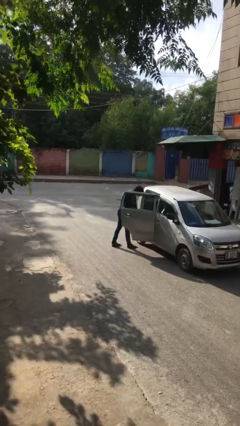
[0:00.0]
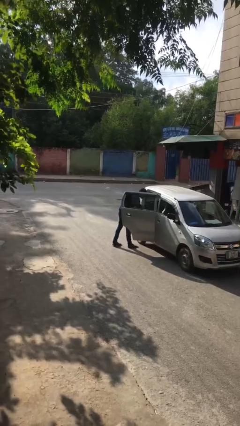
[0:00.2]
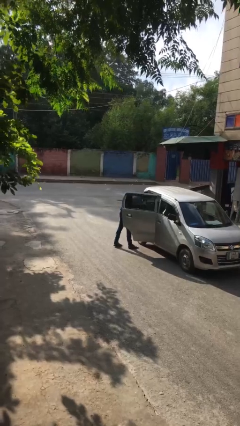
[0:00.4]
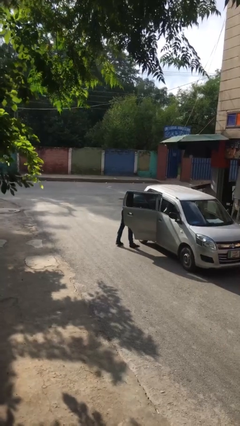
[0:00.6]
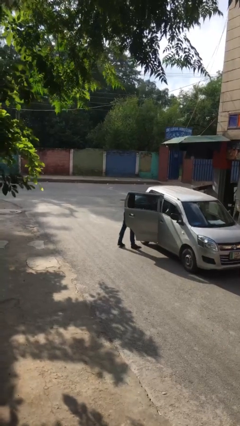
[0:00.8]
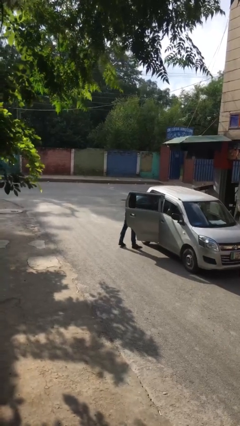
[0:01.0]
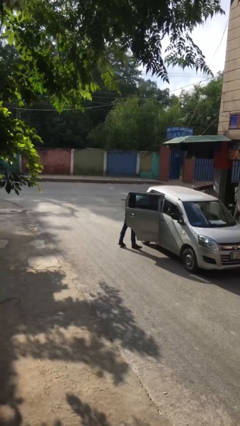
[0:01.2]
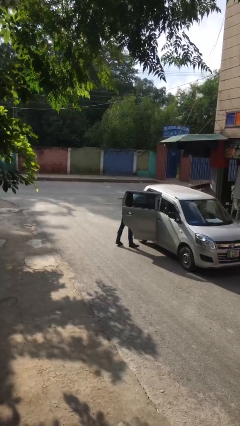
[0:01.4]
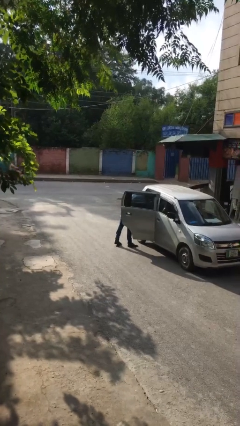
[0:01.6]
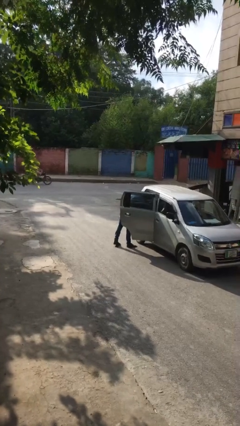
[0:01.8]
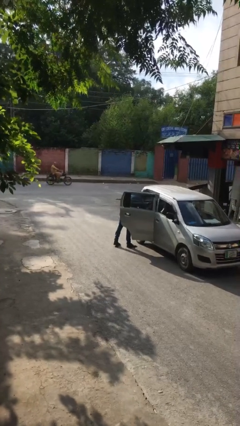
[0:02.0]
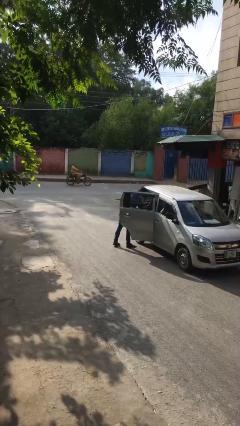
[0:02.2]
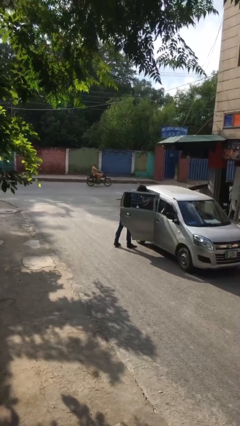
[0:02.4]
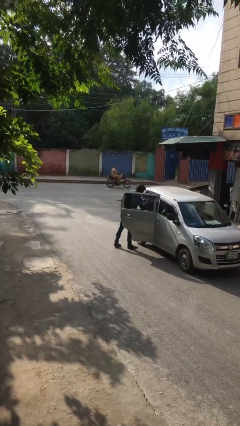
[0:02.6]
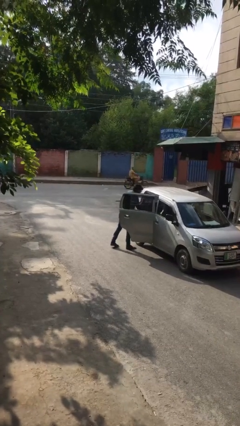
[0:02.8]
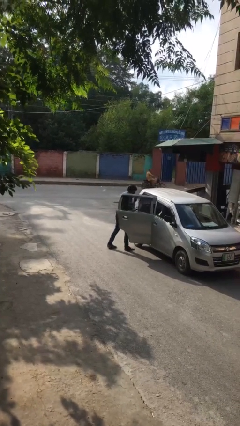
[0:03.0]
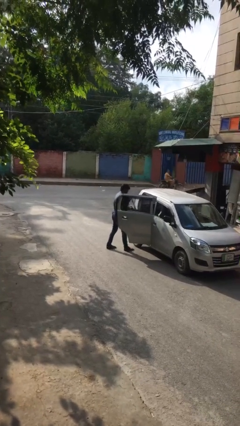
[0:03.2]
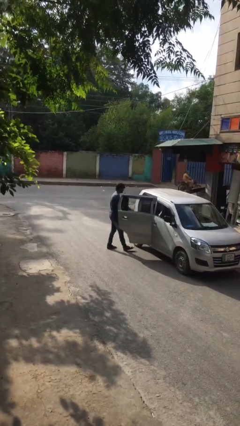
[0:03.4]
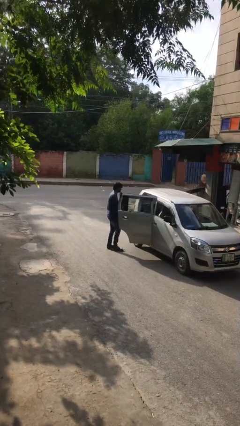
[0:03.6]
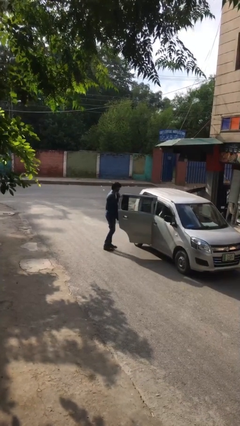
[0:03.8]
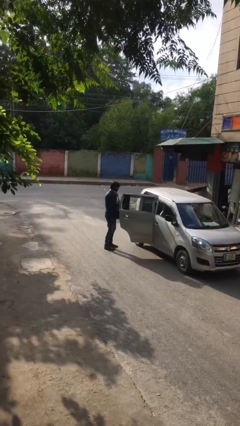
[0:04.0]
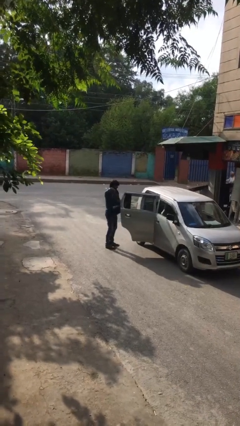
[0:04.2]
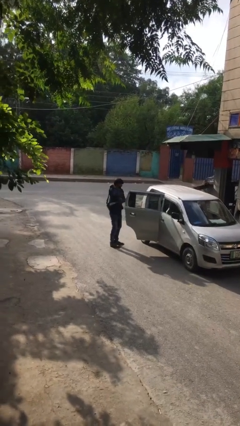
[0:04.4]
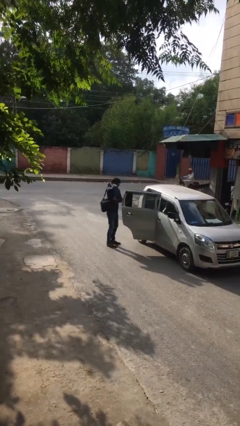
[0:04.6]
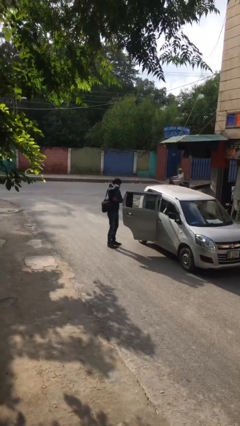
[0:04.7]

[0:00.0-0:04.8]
person unloads car

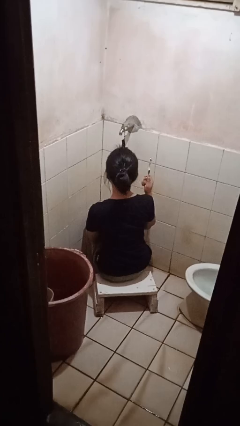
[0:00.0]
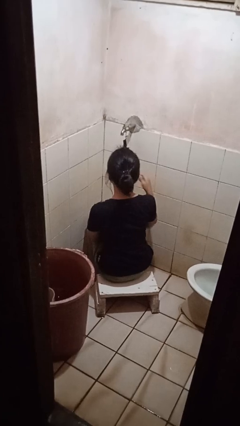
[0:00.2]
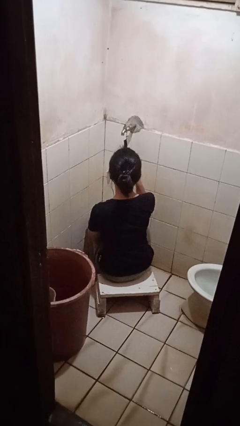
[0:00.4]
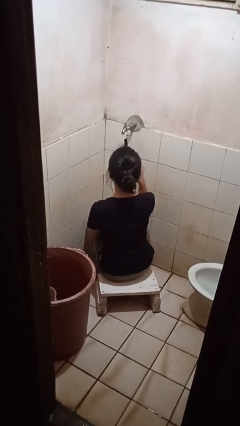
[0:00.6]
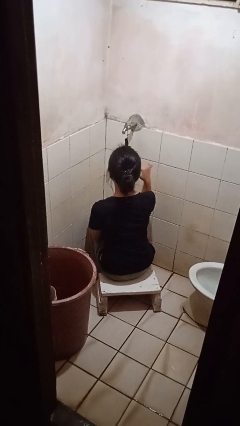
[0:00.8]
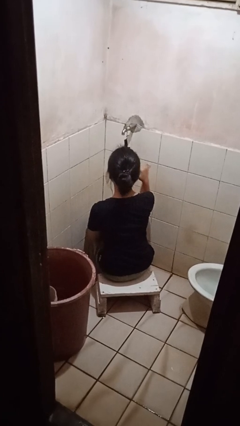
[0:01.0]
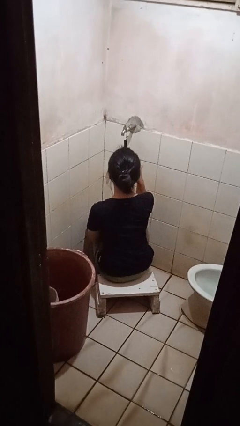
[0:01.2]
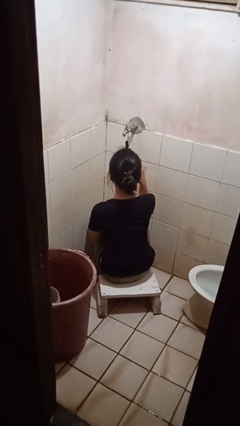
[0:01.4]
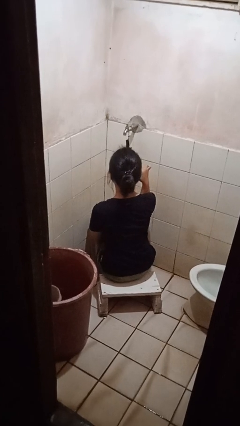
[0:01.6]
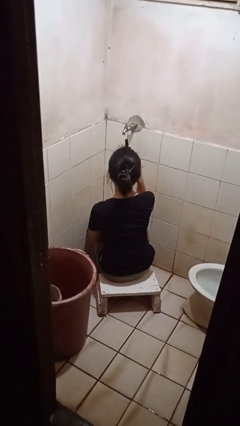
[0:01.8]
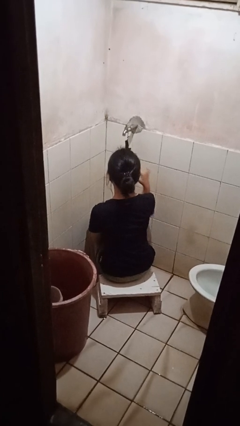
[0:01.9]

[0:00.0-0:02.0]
person brushes teeth

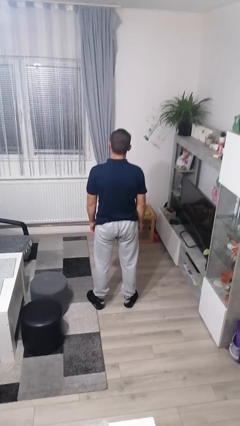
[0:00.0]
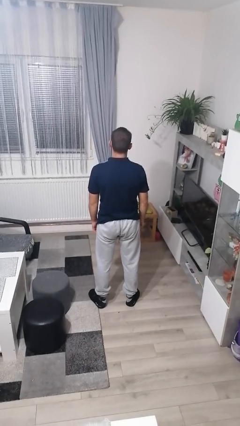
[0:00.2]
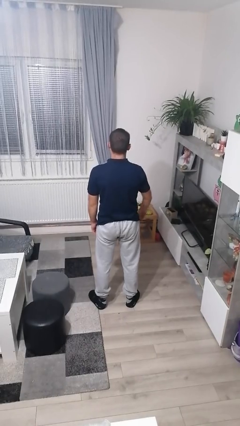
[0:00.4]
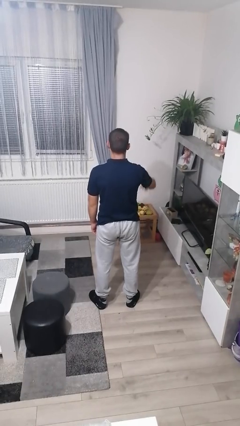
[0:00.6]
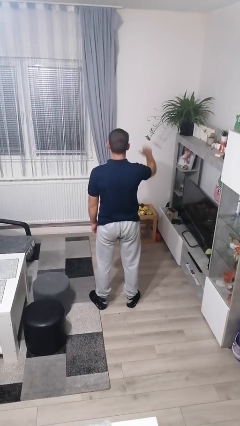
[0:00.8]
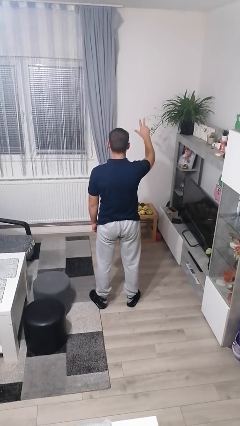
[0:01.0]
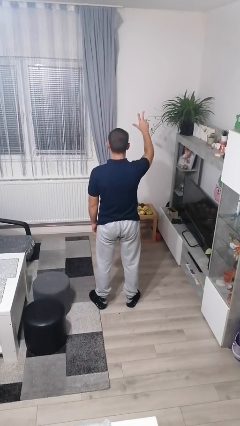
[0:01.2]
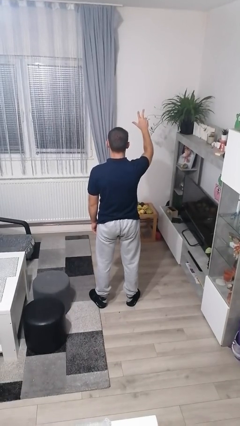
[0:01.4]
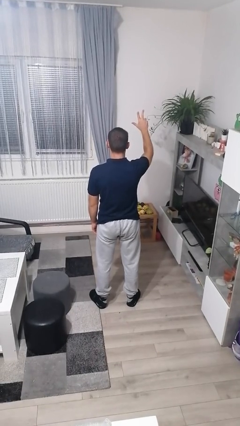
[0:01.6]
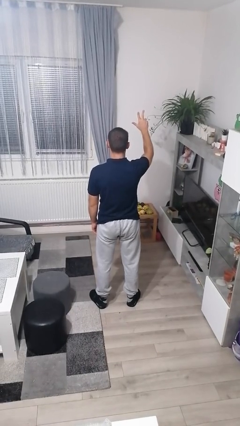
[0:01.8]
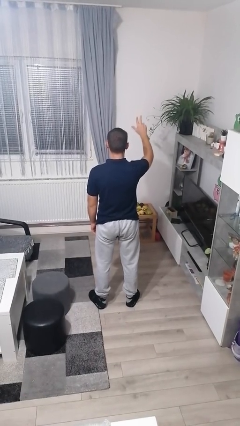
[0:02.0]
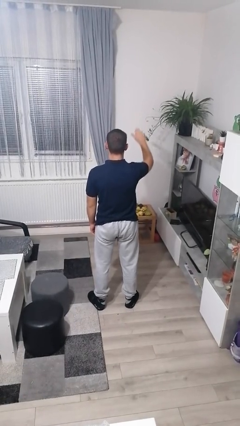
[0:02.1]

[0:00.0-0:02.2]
person gestures number three

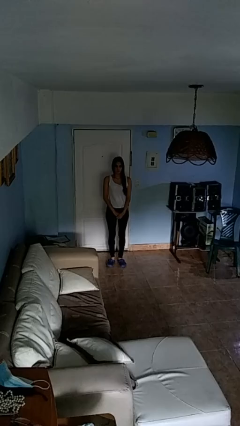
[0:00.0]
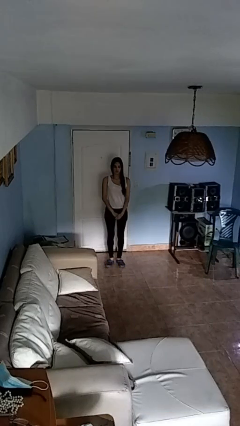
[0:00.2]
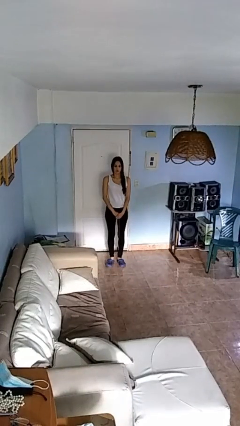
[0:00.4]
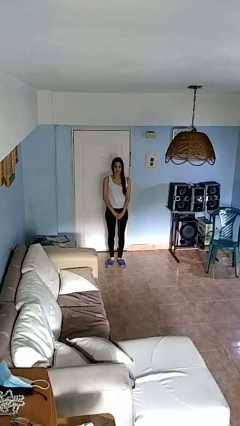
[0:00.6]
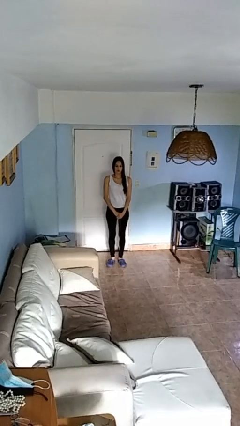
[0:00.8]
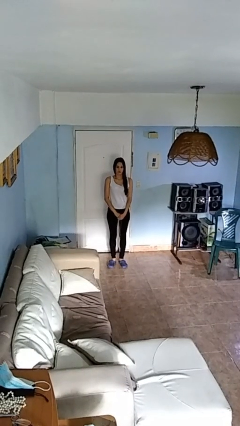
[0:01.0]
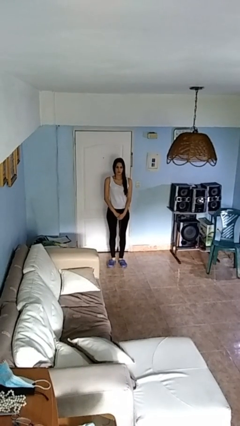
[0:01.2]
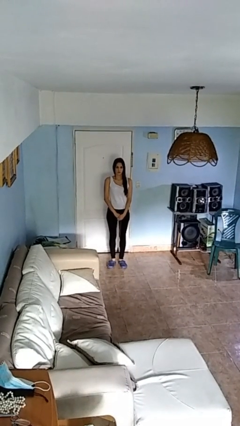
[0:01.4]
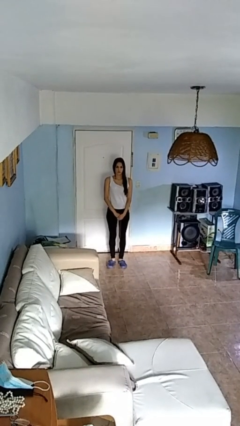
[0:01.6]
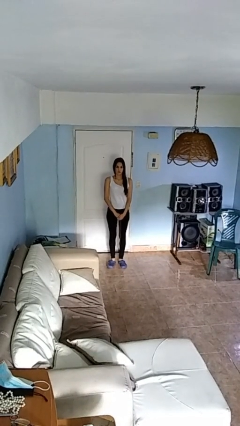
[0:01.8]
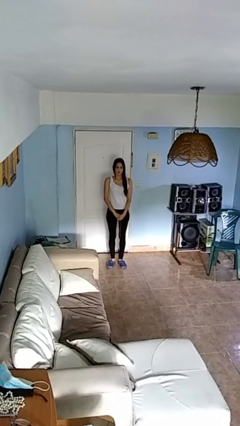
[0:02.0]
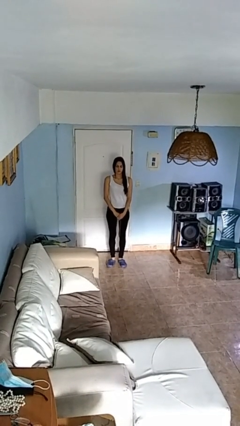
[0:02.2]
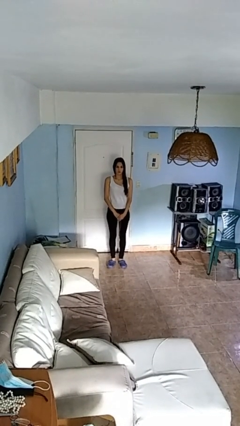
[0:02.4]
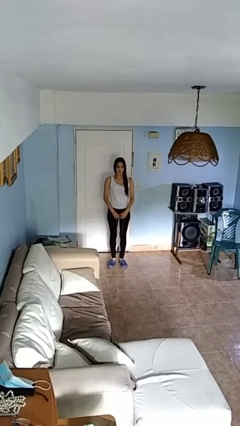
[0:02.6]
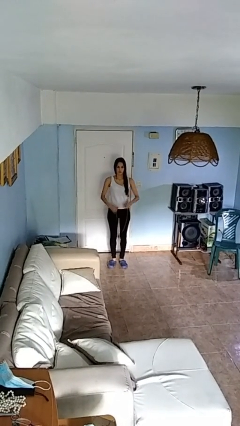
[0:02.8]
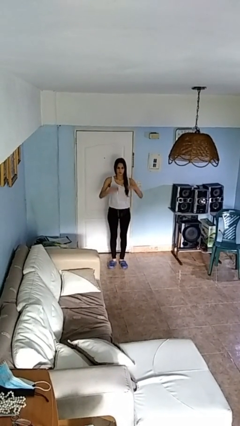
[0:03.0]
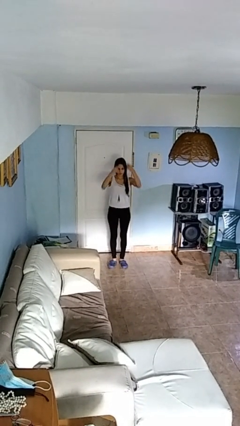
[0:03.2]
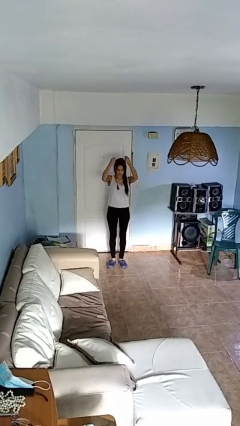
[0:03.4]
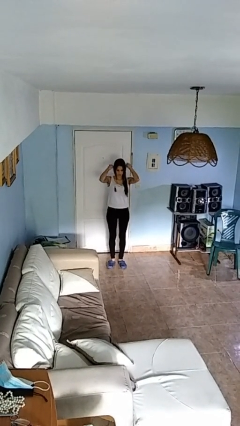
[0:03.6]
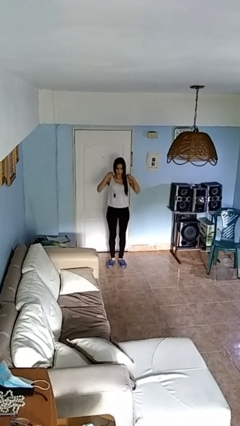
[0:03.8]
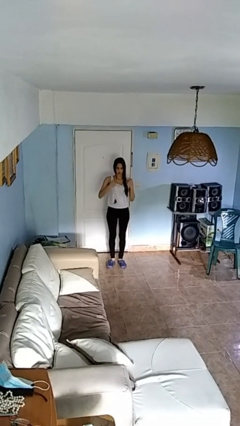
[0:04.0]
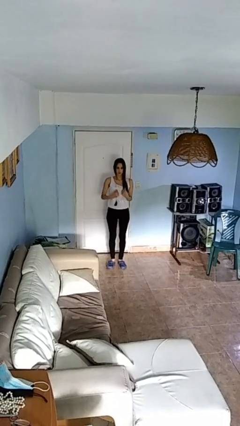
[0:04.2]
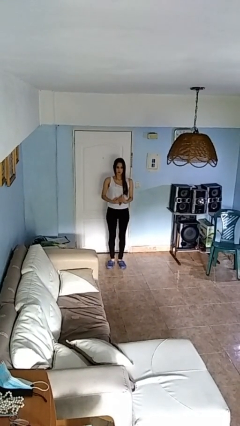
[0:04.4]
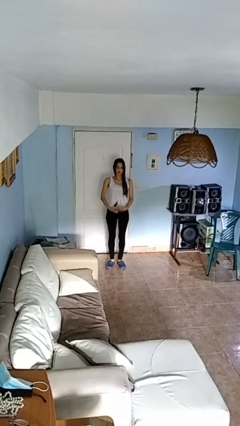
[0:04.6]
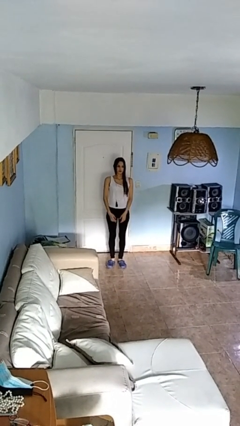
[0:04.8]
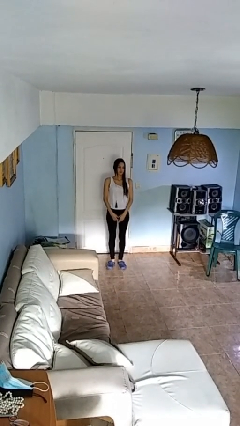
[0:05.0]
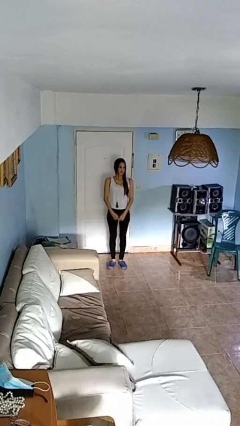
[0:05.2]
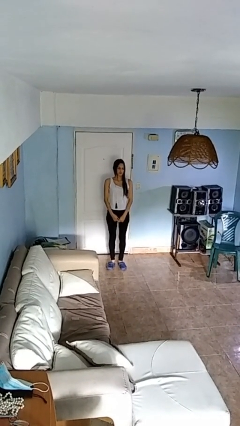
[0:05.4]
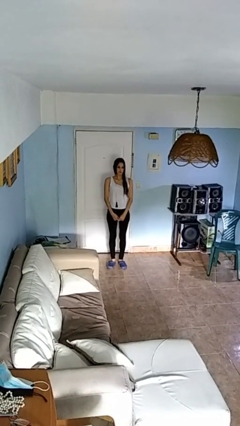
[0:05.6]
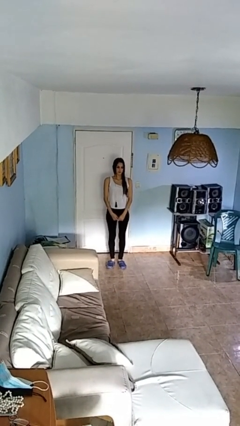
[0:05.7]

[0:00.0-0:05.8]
person puts on necklace

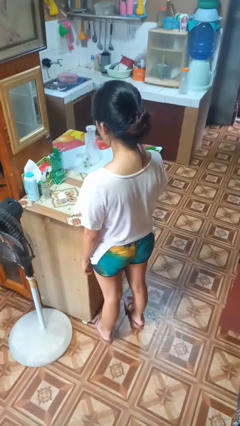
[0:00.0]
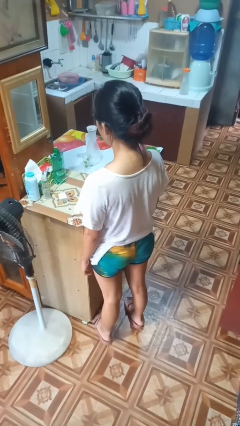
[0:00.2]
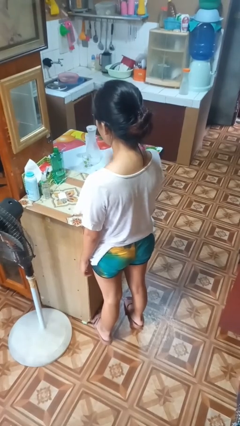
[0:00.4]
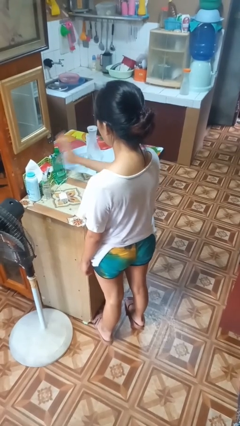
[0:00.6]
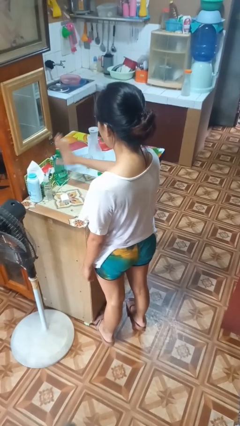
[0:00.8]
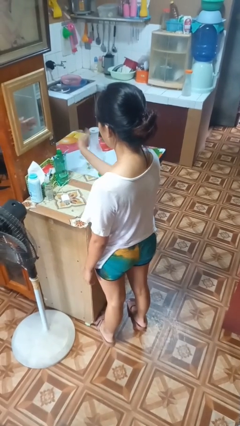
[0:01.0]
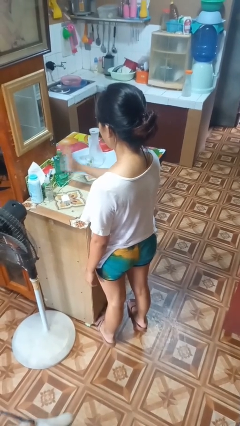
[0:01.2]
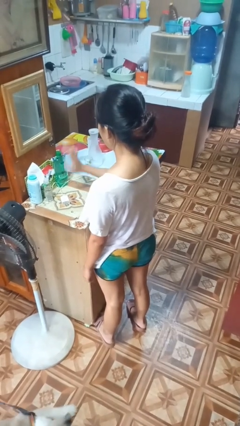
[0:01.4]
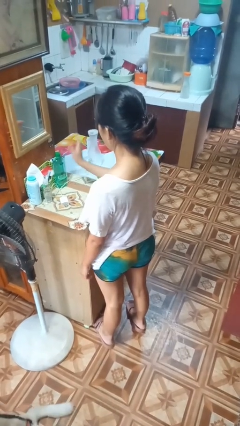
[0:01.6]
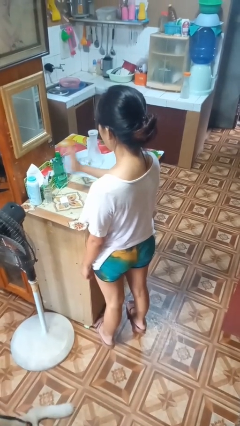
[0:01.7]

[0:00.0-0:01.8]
person waves hand over object

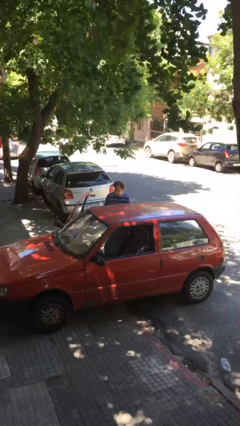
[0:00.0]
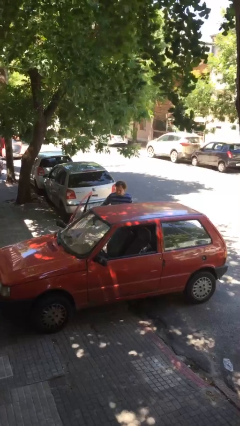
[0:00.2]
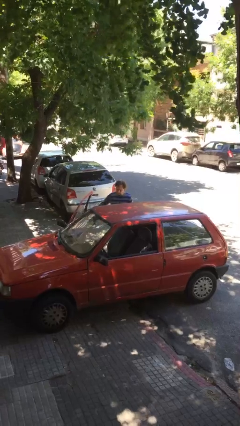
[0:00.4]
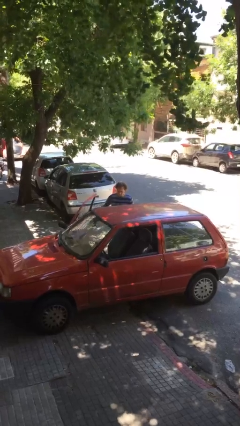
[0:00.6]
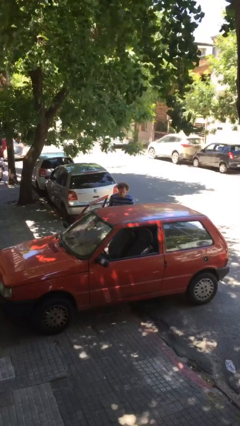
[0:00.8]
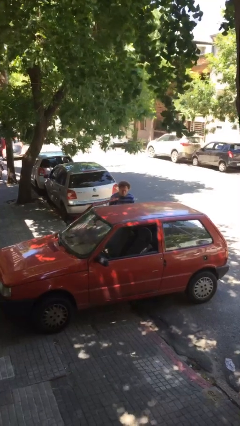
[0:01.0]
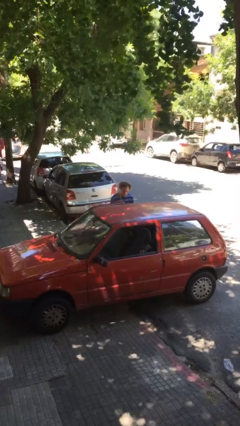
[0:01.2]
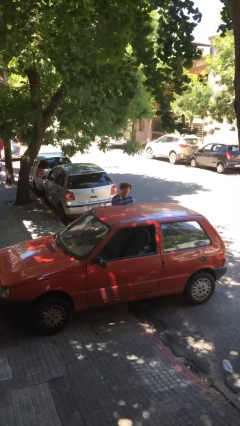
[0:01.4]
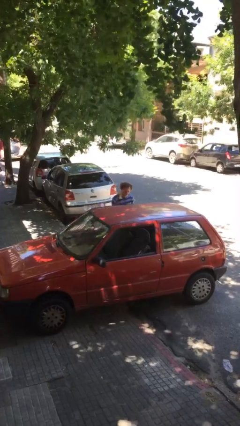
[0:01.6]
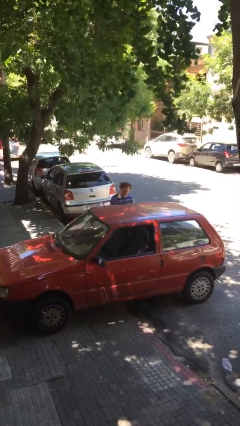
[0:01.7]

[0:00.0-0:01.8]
person closes car door
